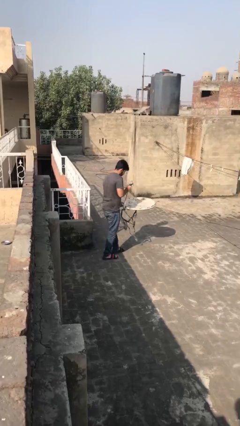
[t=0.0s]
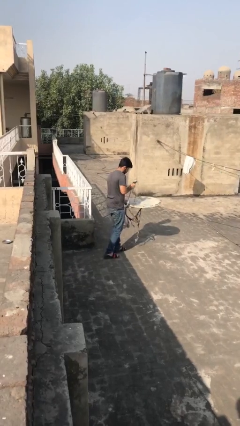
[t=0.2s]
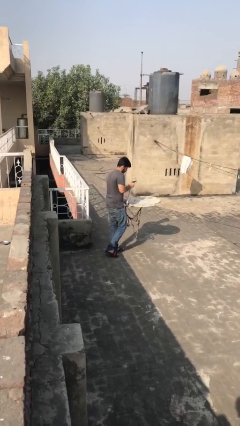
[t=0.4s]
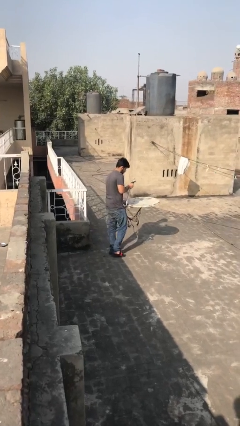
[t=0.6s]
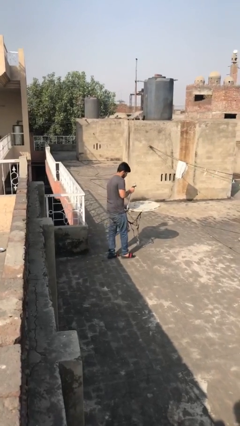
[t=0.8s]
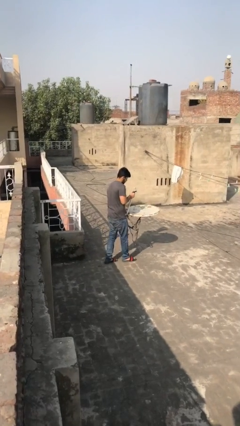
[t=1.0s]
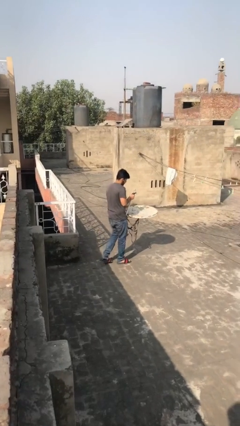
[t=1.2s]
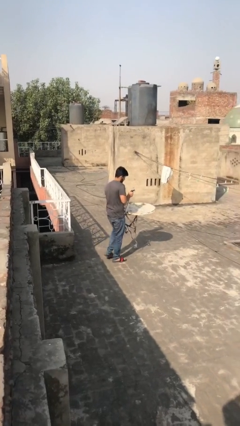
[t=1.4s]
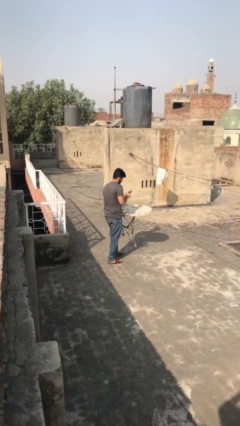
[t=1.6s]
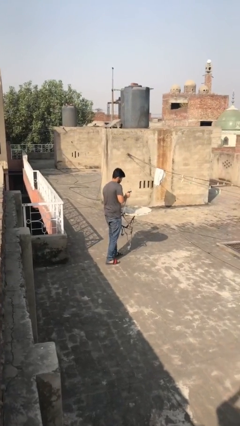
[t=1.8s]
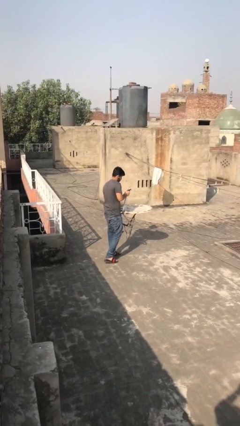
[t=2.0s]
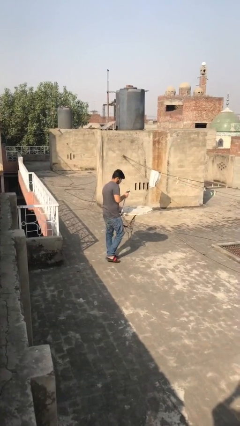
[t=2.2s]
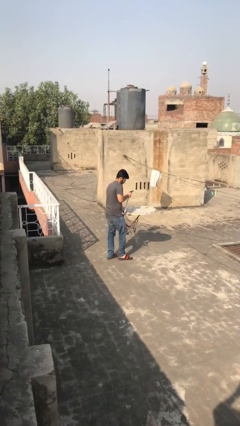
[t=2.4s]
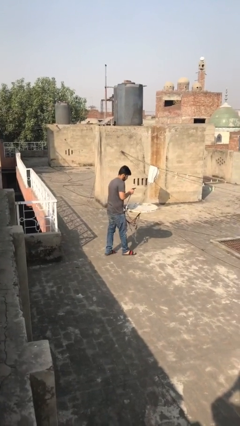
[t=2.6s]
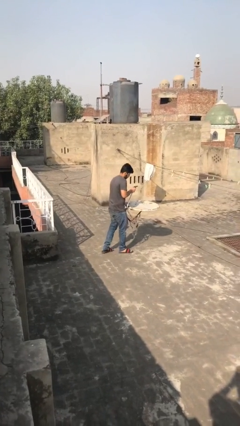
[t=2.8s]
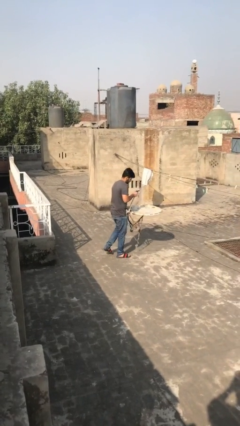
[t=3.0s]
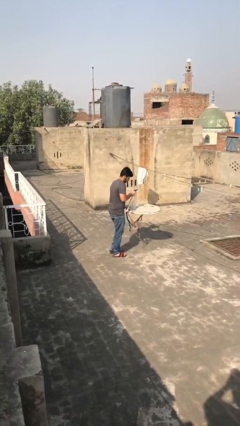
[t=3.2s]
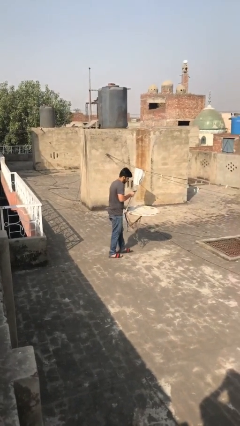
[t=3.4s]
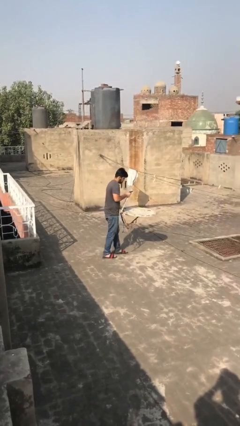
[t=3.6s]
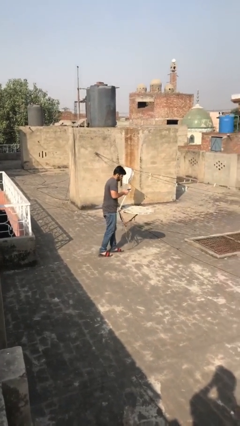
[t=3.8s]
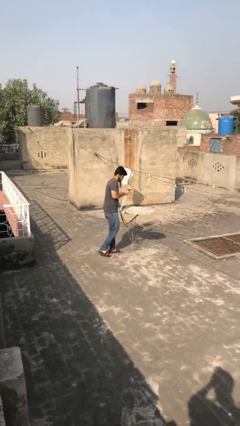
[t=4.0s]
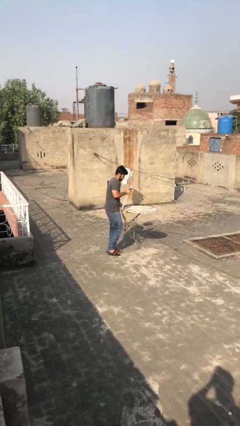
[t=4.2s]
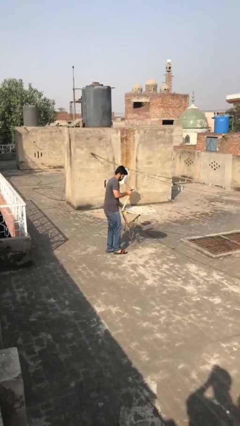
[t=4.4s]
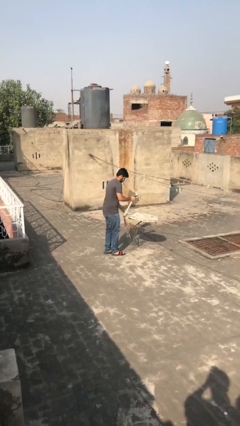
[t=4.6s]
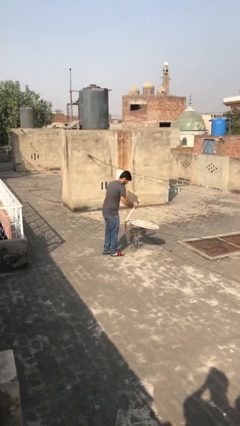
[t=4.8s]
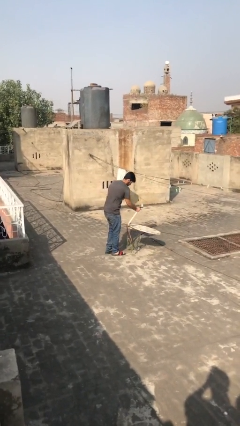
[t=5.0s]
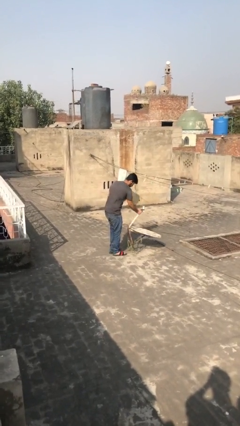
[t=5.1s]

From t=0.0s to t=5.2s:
person carries heavy object

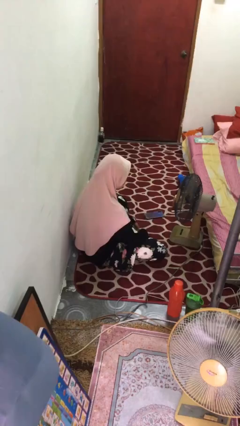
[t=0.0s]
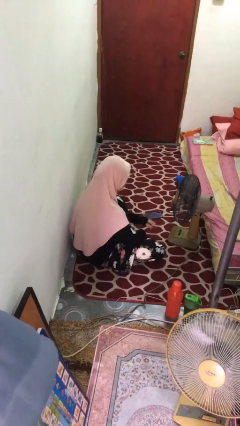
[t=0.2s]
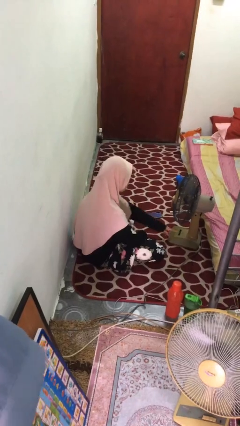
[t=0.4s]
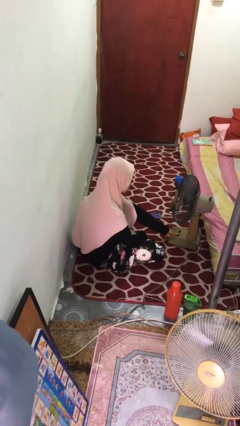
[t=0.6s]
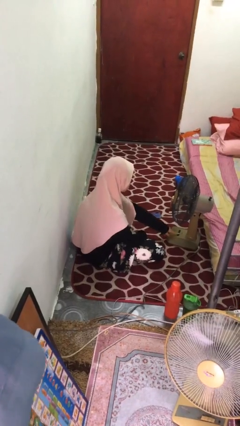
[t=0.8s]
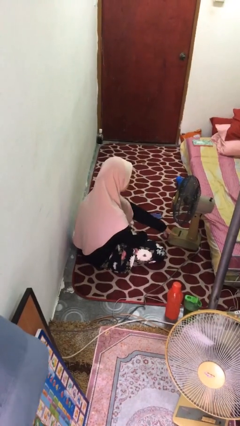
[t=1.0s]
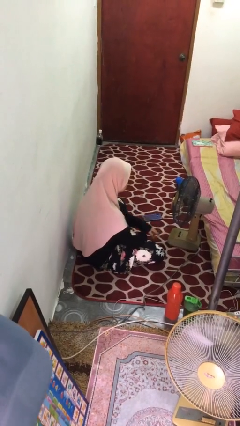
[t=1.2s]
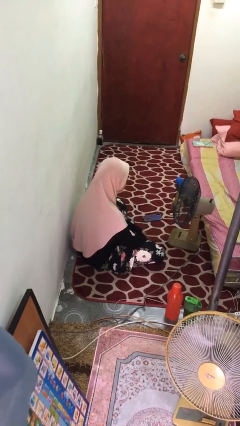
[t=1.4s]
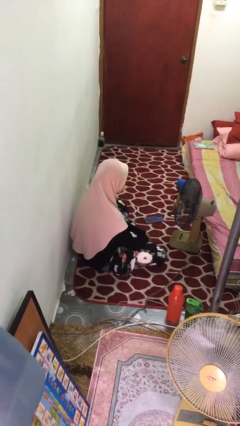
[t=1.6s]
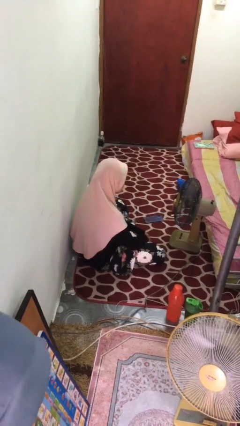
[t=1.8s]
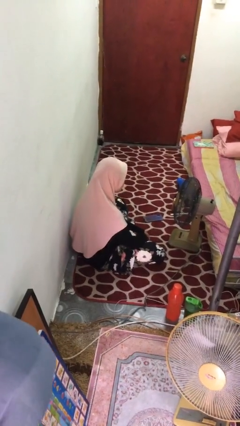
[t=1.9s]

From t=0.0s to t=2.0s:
person turns on fan

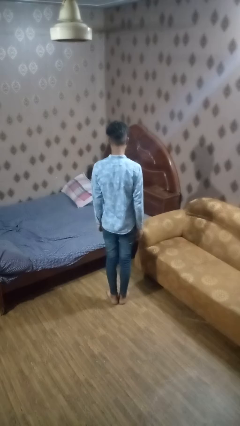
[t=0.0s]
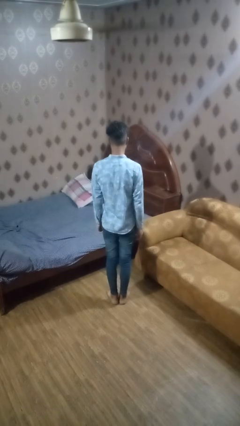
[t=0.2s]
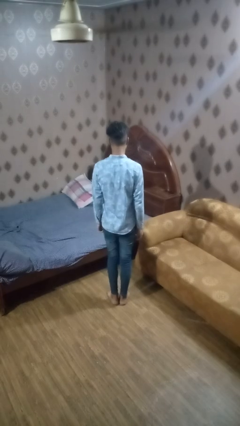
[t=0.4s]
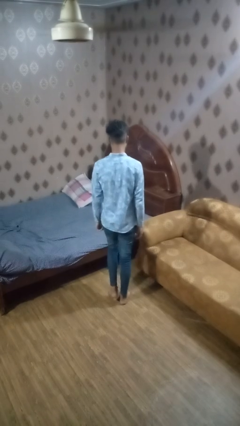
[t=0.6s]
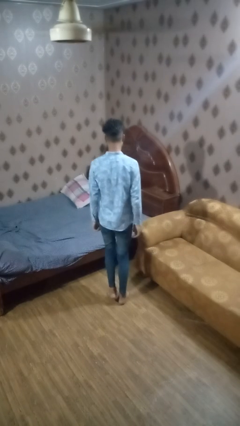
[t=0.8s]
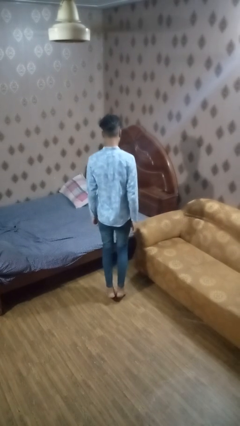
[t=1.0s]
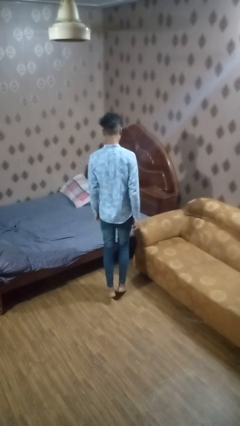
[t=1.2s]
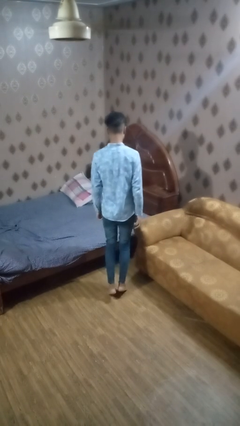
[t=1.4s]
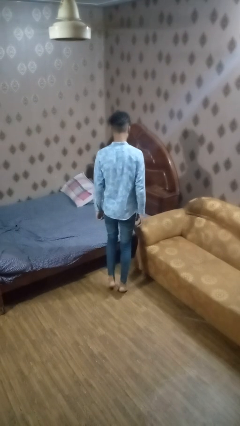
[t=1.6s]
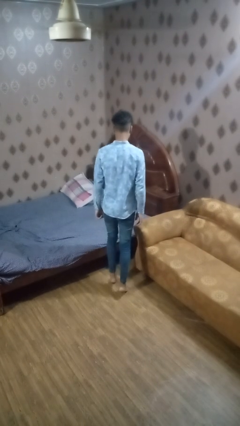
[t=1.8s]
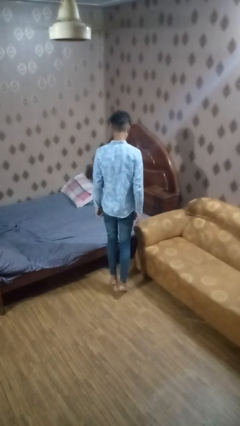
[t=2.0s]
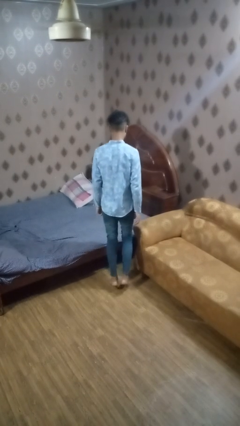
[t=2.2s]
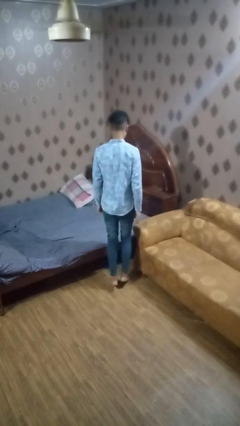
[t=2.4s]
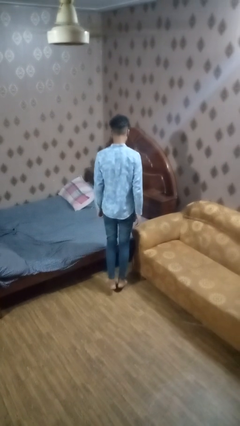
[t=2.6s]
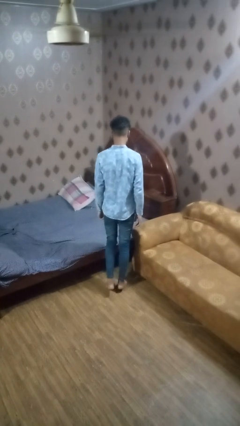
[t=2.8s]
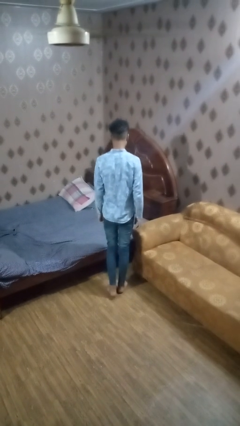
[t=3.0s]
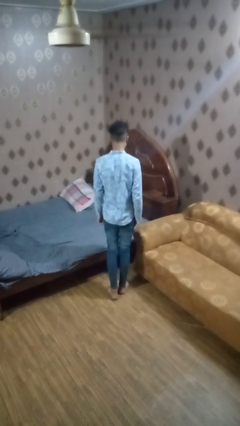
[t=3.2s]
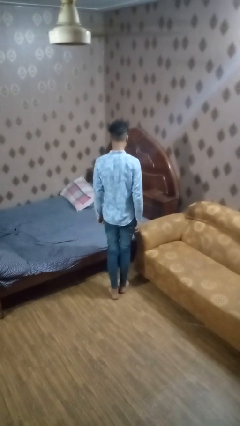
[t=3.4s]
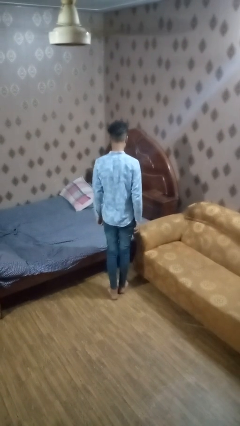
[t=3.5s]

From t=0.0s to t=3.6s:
person walks tiptoe

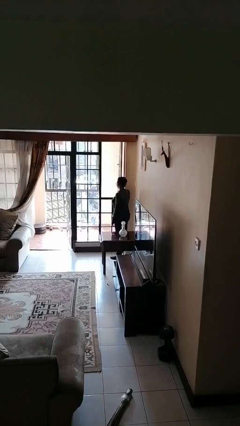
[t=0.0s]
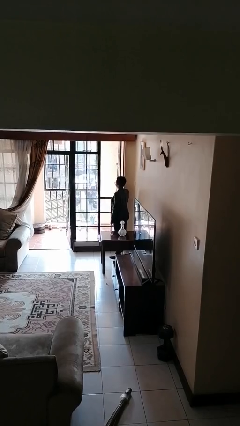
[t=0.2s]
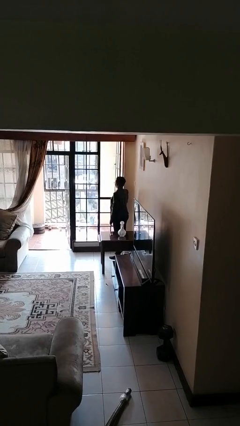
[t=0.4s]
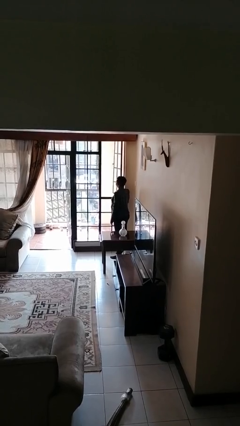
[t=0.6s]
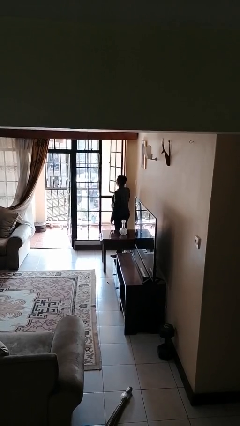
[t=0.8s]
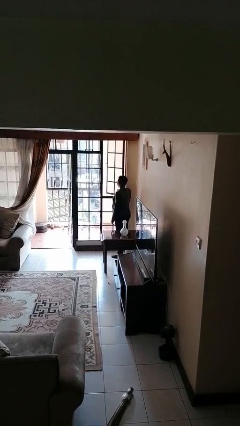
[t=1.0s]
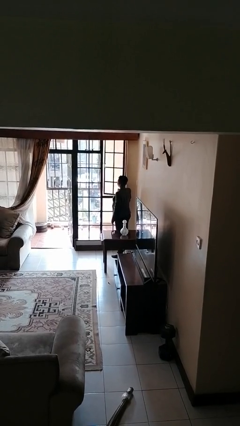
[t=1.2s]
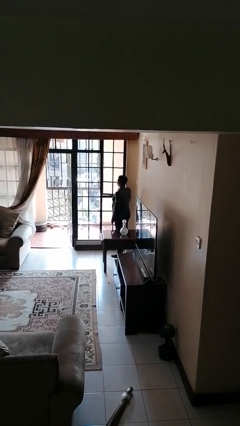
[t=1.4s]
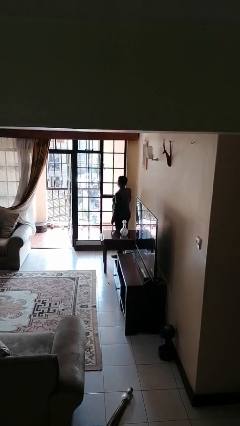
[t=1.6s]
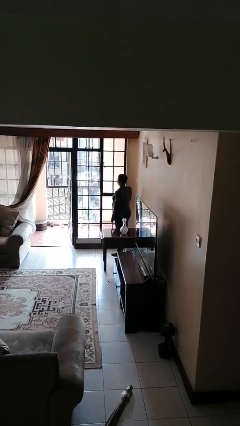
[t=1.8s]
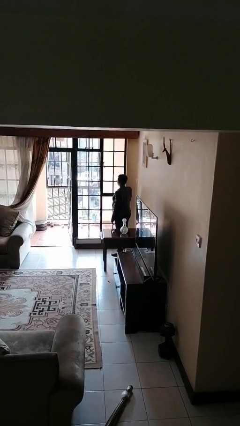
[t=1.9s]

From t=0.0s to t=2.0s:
person closes home window

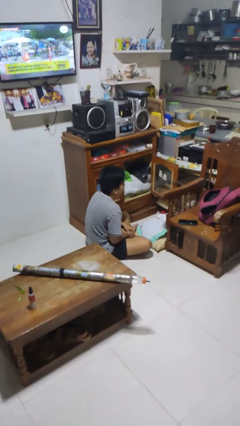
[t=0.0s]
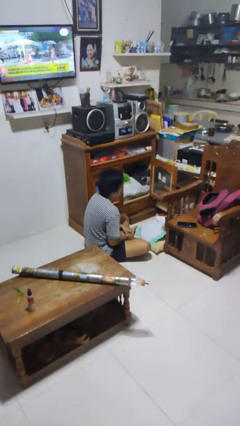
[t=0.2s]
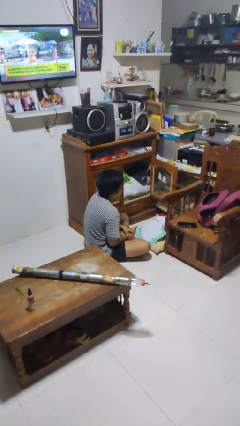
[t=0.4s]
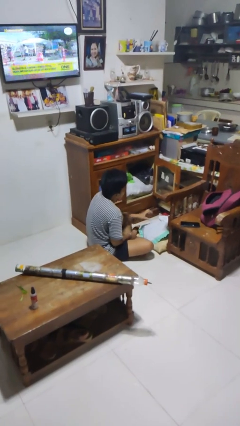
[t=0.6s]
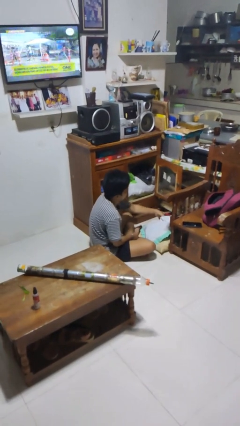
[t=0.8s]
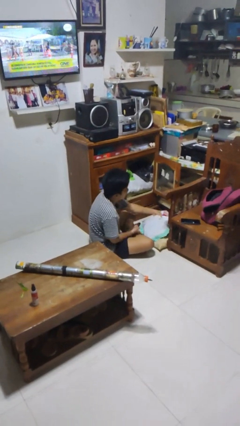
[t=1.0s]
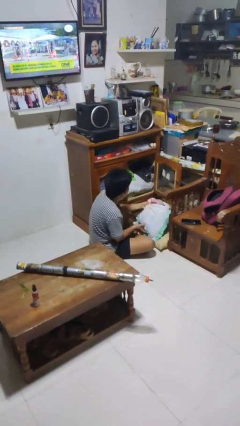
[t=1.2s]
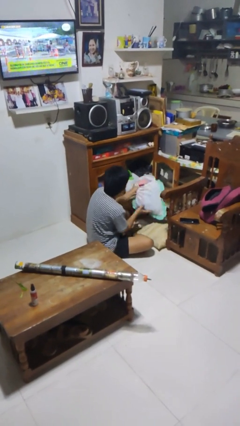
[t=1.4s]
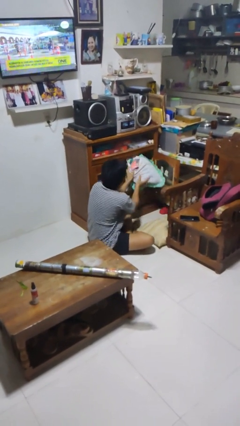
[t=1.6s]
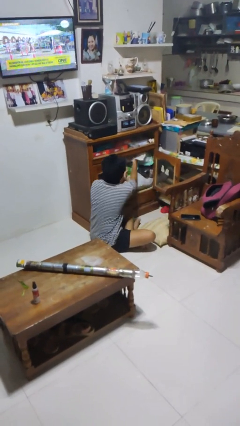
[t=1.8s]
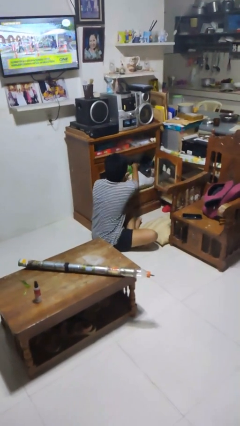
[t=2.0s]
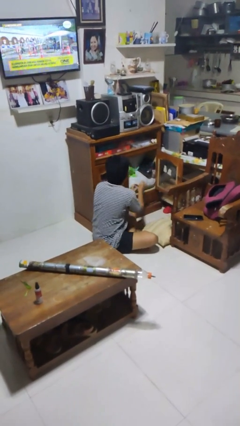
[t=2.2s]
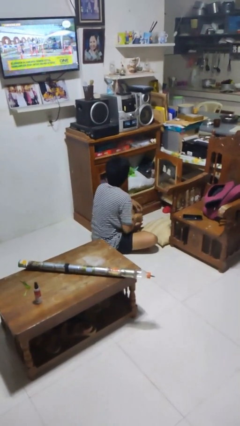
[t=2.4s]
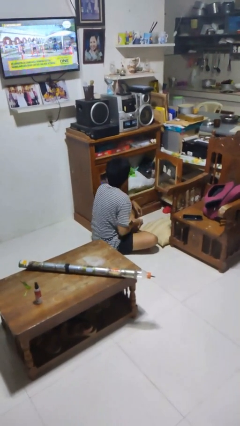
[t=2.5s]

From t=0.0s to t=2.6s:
person takes clothes from dresser

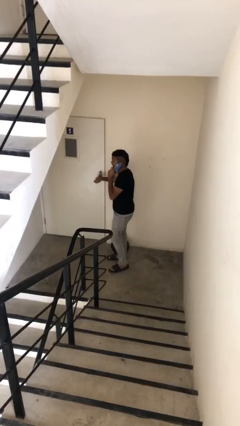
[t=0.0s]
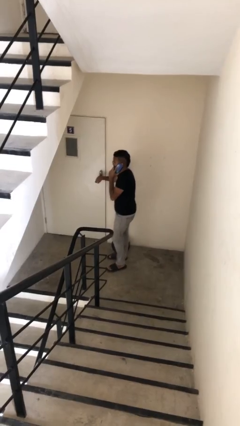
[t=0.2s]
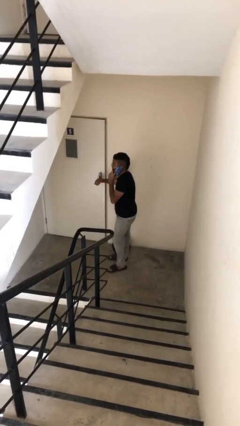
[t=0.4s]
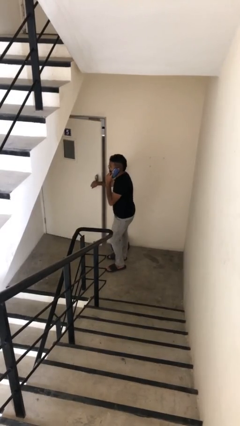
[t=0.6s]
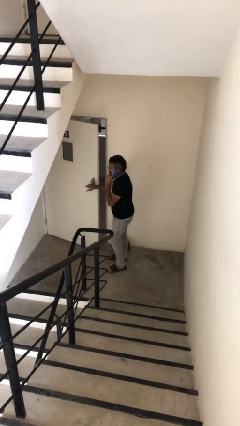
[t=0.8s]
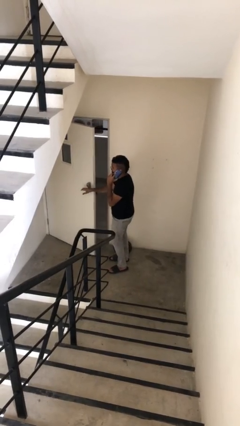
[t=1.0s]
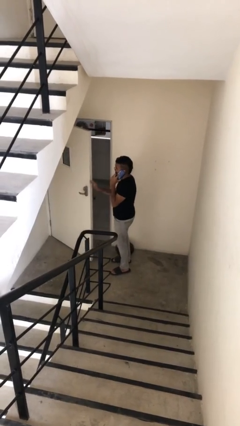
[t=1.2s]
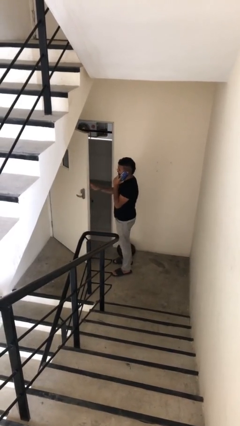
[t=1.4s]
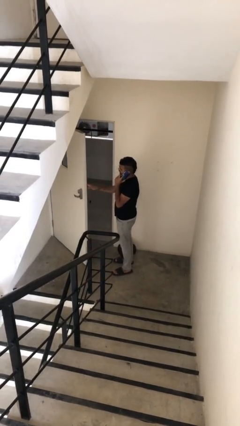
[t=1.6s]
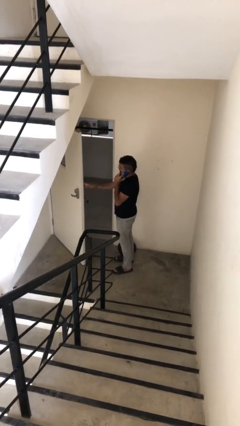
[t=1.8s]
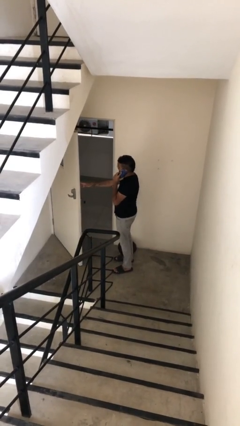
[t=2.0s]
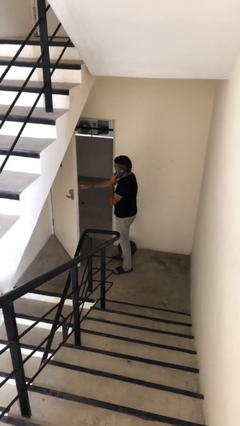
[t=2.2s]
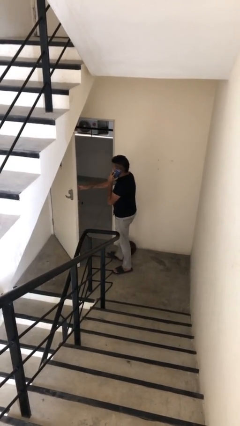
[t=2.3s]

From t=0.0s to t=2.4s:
person opens facility door
